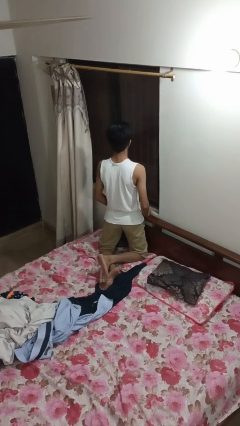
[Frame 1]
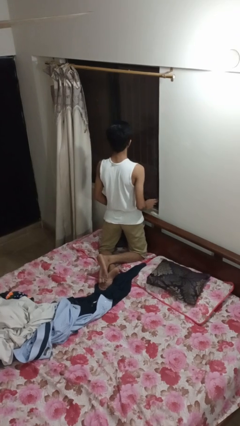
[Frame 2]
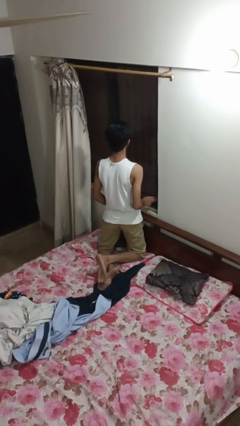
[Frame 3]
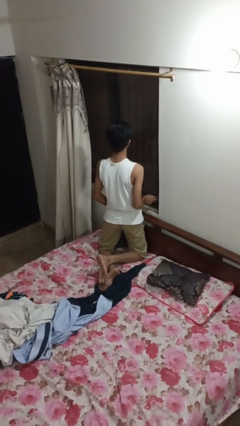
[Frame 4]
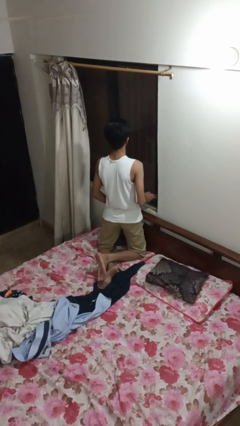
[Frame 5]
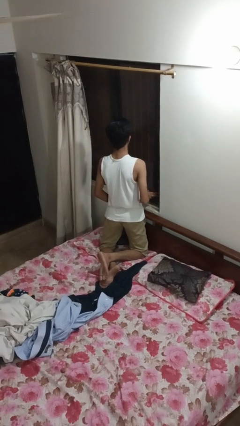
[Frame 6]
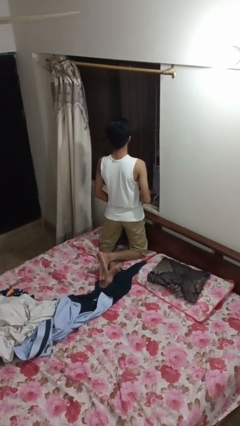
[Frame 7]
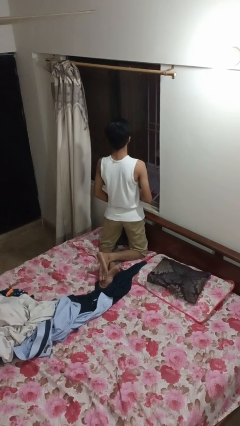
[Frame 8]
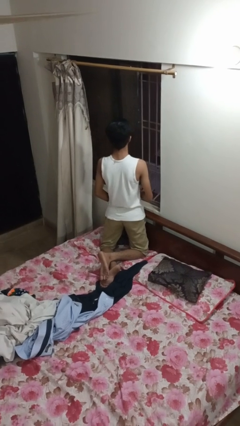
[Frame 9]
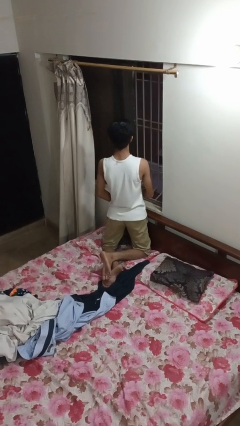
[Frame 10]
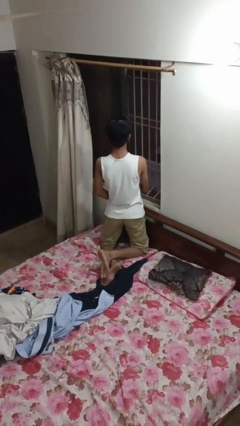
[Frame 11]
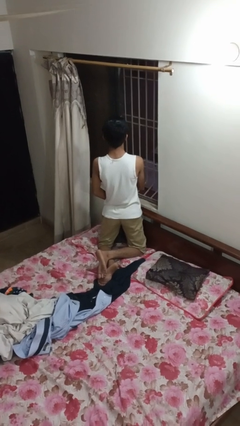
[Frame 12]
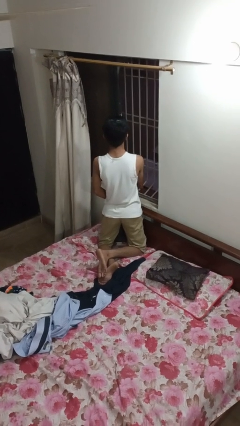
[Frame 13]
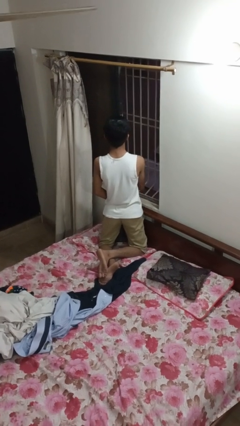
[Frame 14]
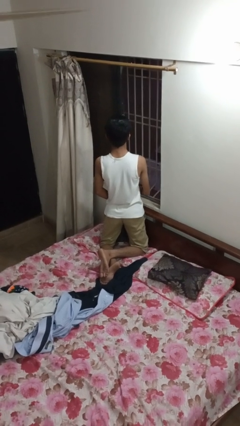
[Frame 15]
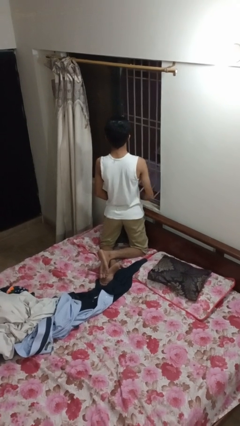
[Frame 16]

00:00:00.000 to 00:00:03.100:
person opens home window

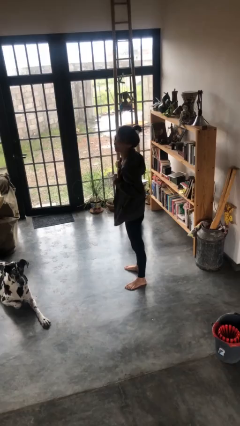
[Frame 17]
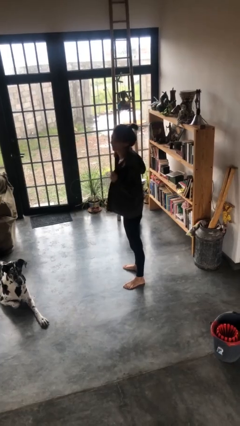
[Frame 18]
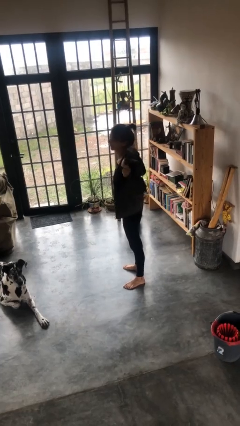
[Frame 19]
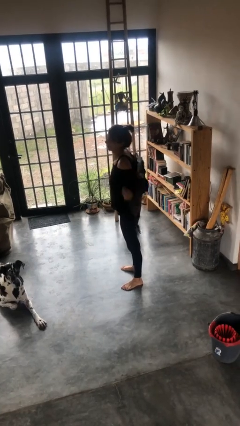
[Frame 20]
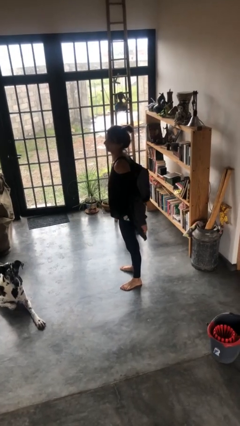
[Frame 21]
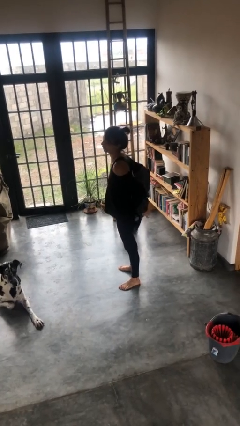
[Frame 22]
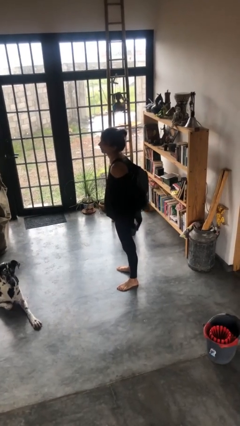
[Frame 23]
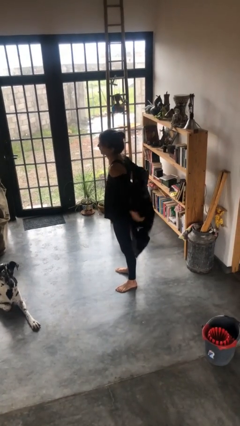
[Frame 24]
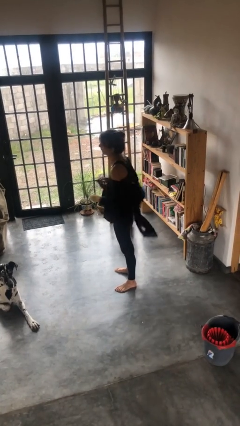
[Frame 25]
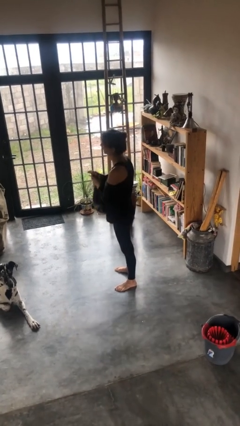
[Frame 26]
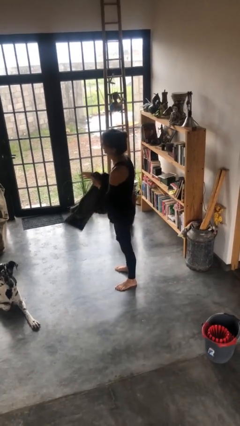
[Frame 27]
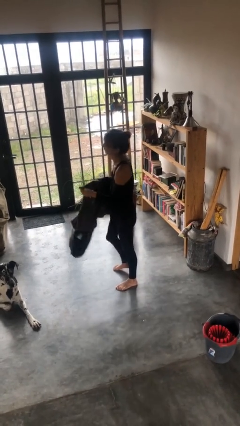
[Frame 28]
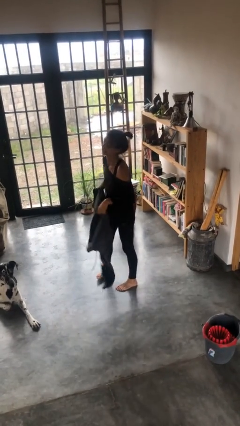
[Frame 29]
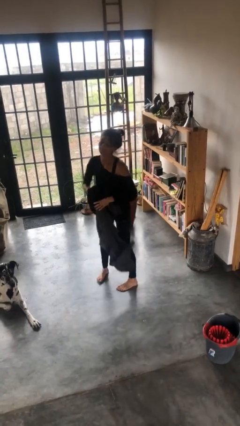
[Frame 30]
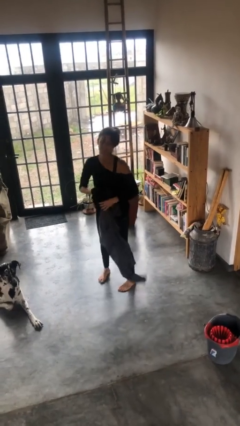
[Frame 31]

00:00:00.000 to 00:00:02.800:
person takes off jacket

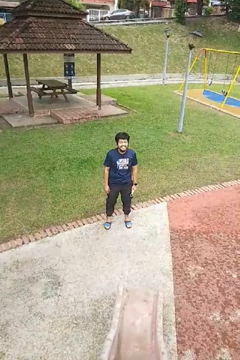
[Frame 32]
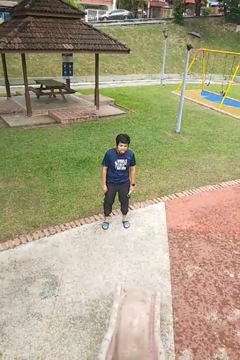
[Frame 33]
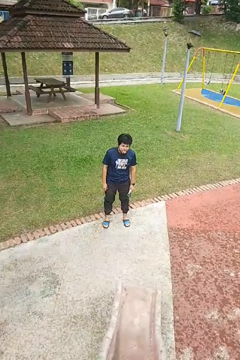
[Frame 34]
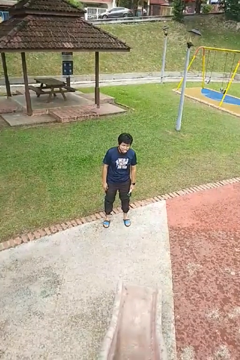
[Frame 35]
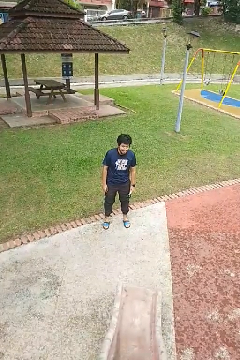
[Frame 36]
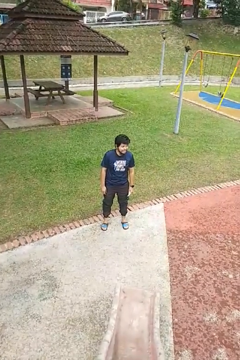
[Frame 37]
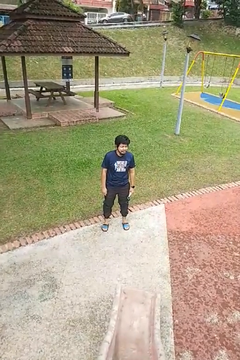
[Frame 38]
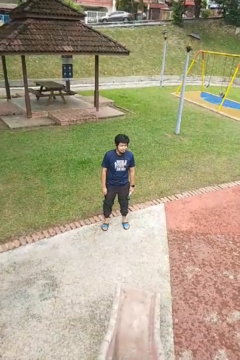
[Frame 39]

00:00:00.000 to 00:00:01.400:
person sticks out tongue

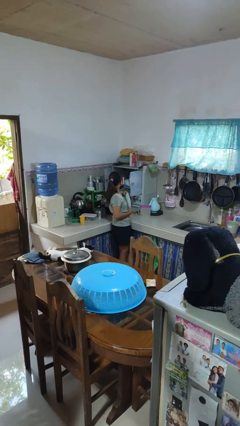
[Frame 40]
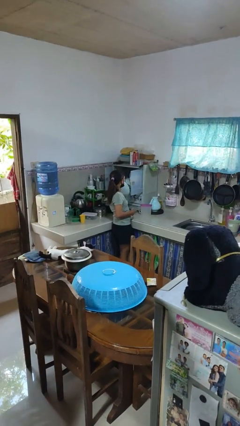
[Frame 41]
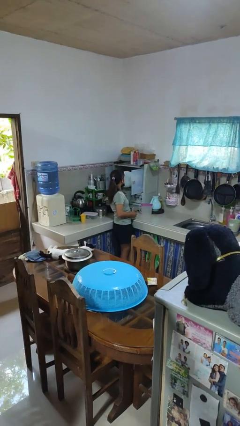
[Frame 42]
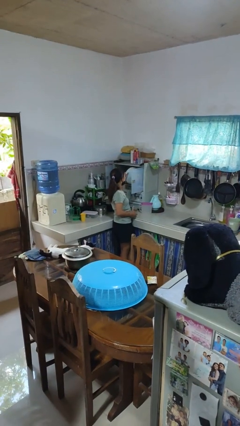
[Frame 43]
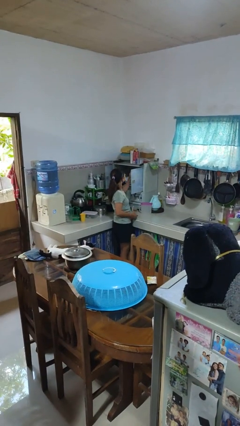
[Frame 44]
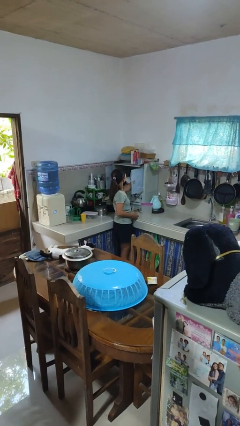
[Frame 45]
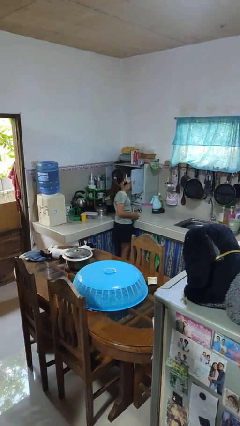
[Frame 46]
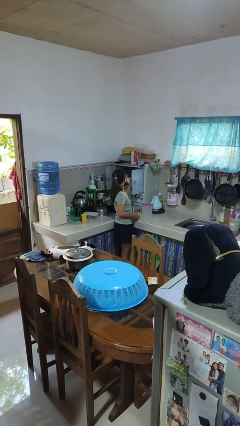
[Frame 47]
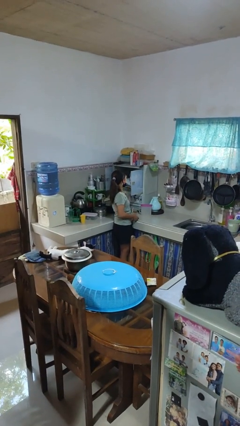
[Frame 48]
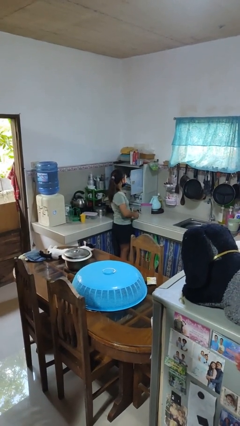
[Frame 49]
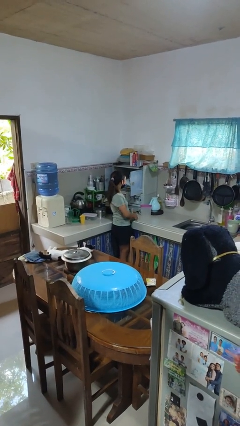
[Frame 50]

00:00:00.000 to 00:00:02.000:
person puts object into kitchen drawer

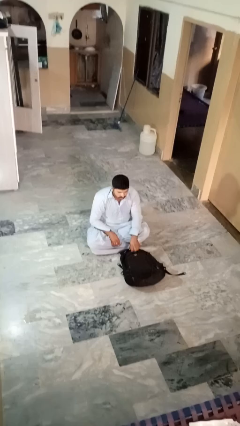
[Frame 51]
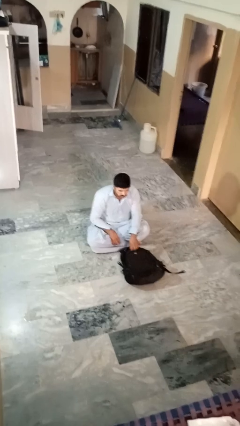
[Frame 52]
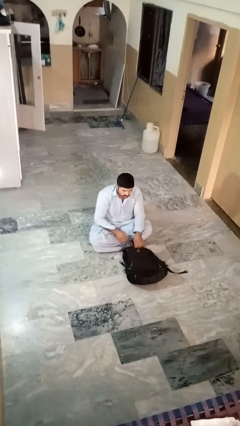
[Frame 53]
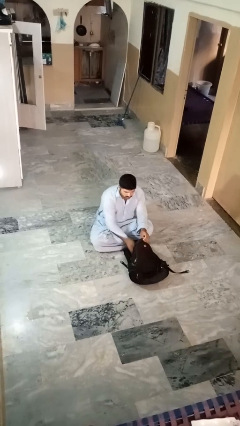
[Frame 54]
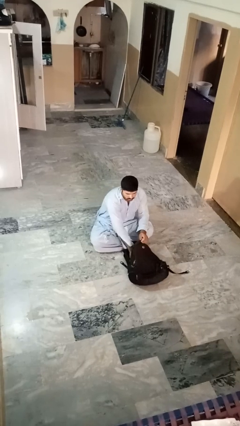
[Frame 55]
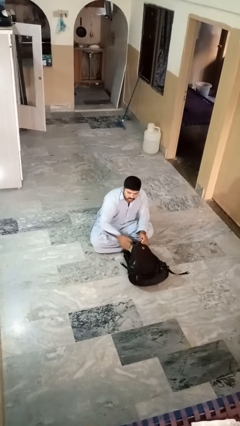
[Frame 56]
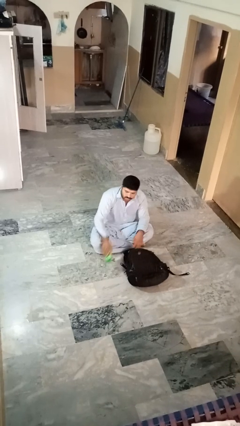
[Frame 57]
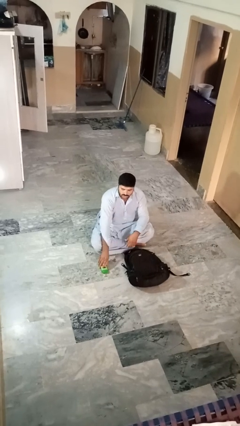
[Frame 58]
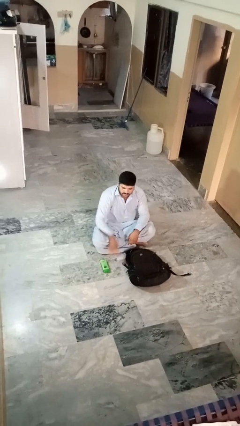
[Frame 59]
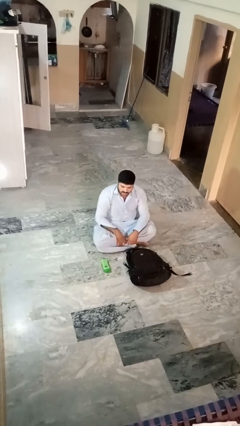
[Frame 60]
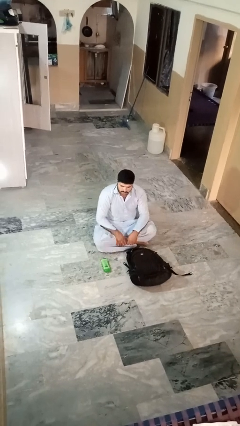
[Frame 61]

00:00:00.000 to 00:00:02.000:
person takes object from bag

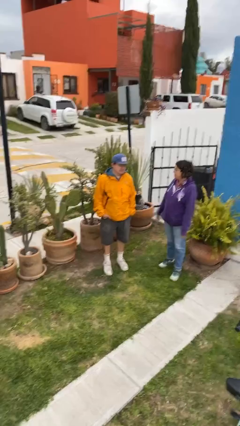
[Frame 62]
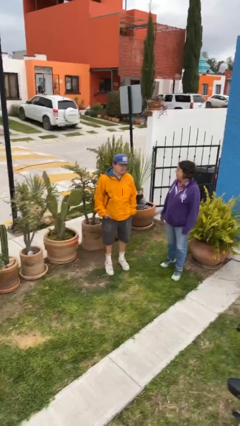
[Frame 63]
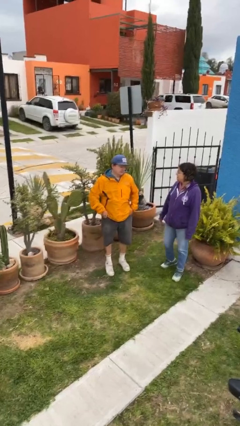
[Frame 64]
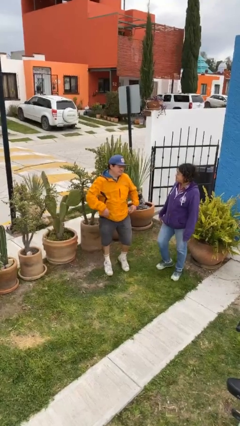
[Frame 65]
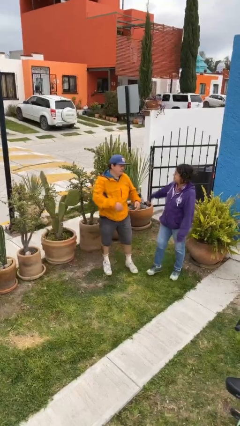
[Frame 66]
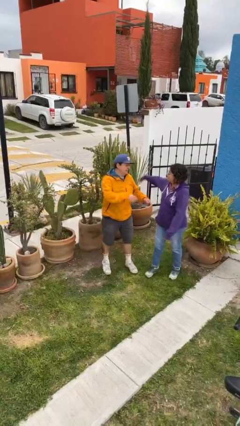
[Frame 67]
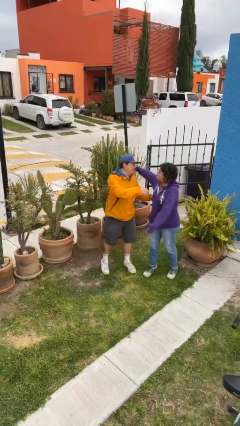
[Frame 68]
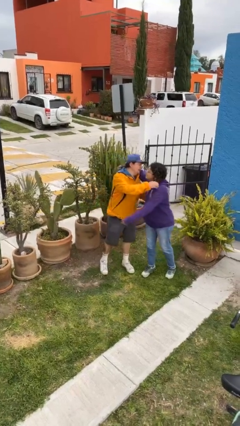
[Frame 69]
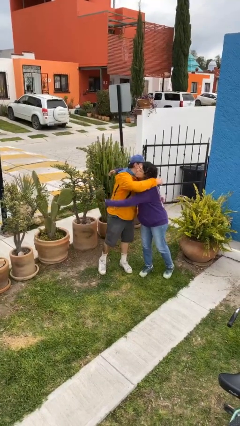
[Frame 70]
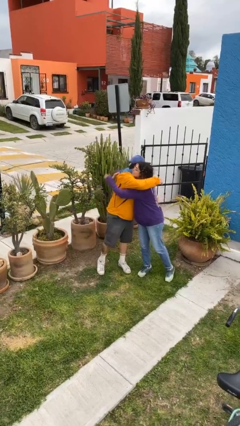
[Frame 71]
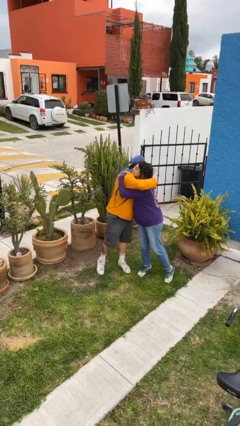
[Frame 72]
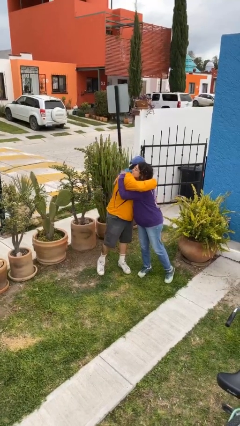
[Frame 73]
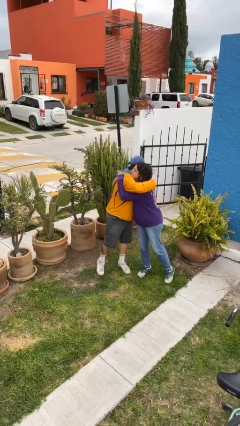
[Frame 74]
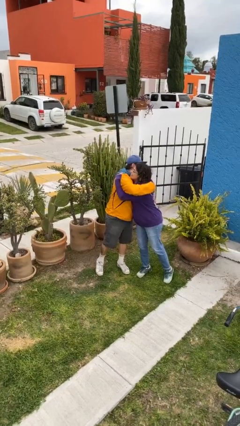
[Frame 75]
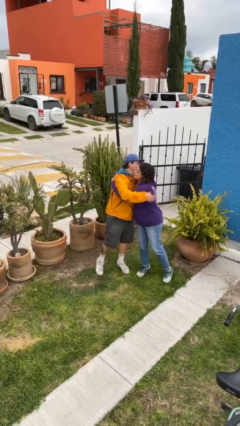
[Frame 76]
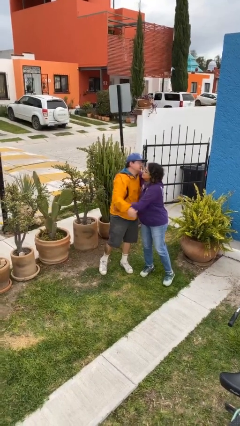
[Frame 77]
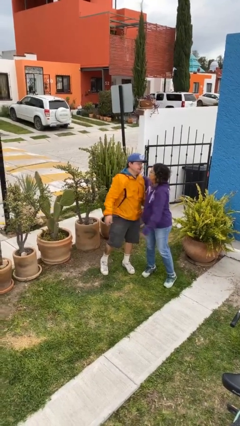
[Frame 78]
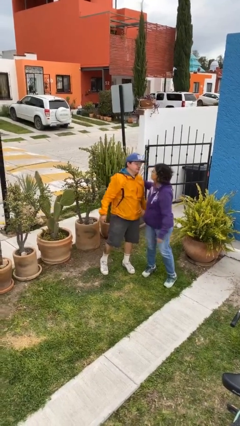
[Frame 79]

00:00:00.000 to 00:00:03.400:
person embraces person

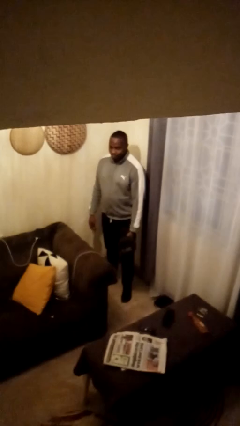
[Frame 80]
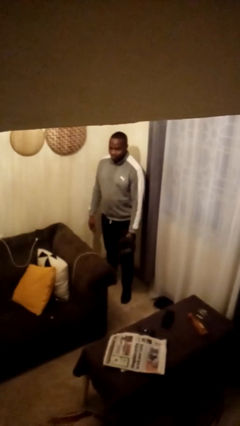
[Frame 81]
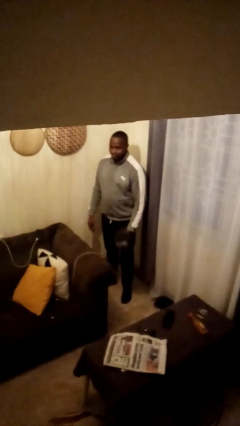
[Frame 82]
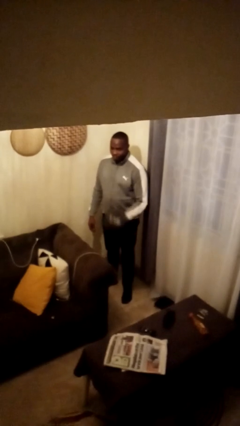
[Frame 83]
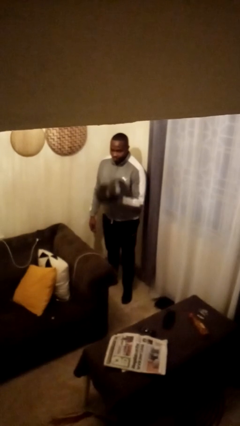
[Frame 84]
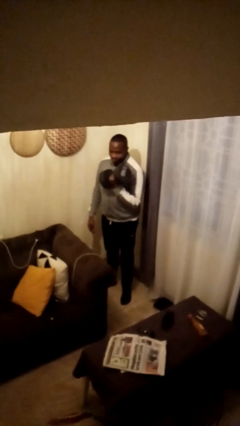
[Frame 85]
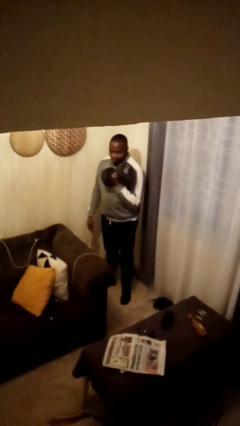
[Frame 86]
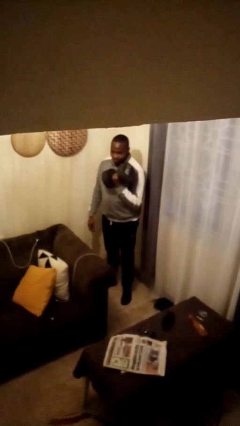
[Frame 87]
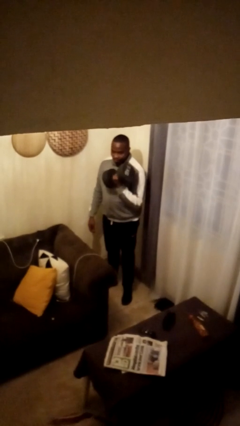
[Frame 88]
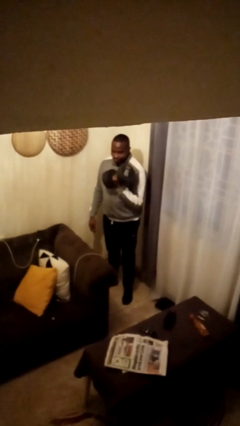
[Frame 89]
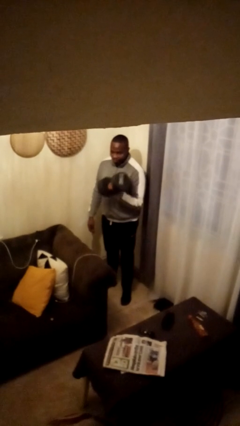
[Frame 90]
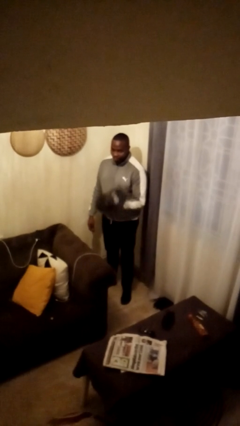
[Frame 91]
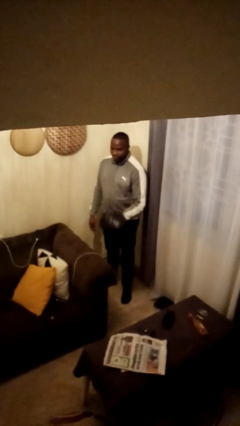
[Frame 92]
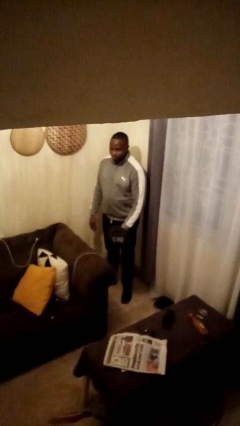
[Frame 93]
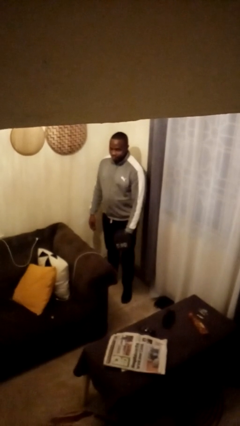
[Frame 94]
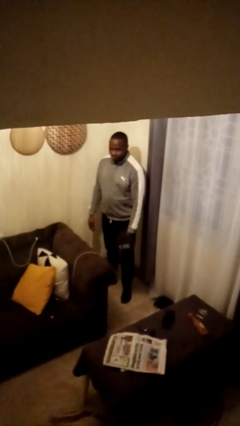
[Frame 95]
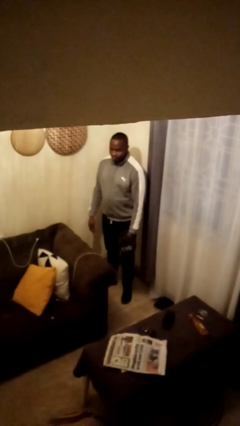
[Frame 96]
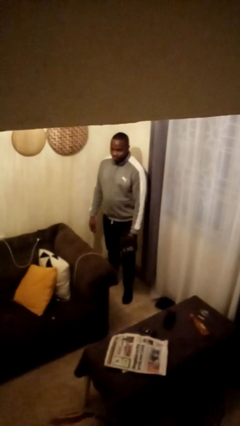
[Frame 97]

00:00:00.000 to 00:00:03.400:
person lifts dumbbells
